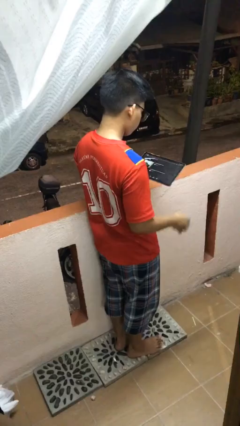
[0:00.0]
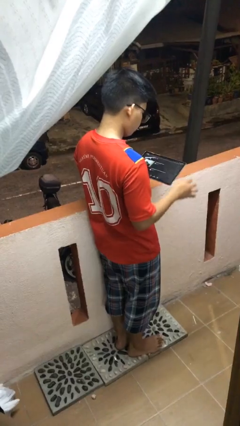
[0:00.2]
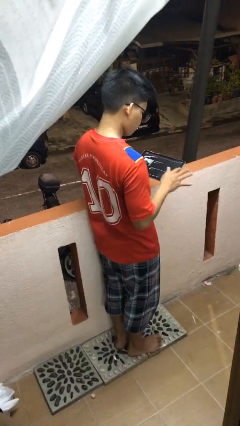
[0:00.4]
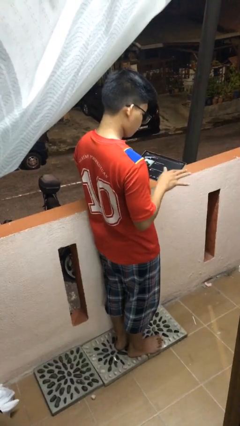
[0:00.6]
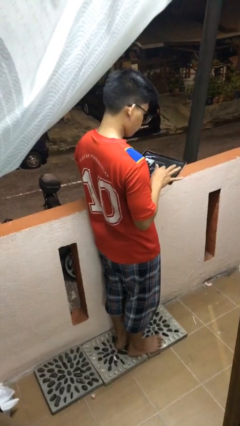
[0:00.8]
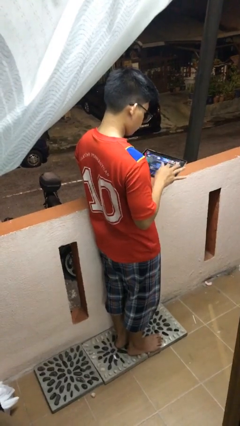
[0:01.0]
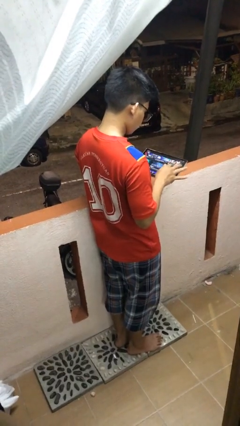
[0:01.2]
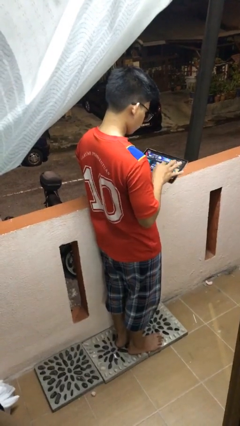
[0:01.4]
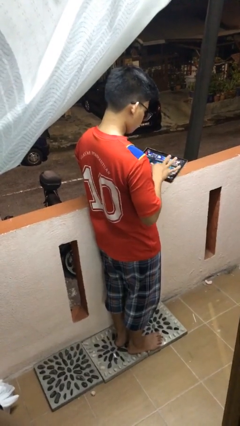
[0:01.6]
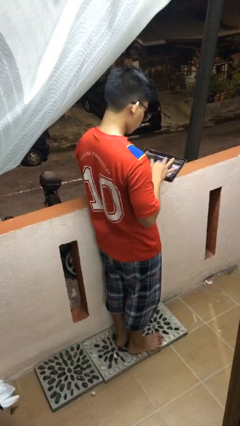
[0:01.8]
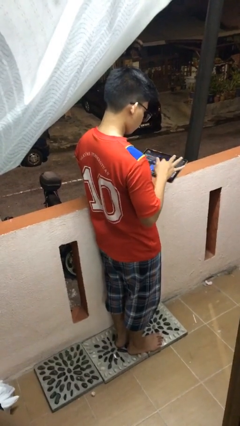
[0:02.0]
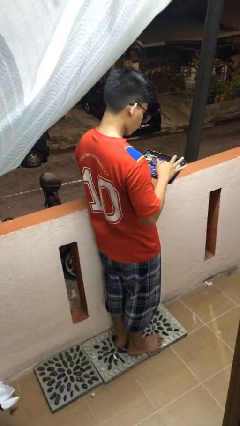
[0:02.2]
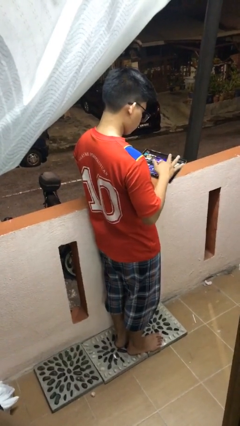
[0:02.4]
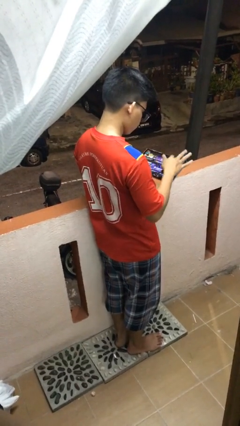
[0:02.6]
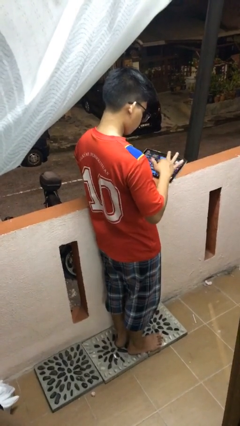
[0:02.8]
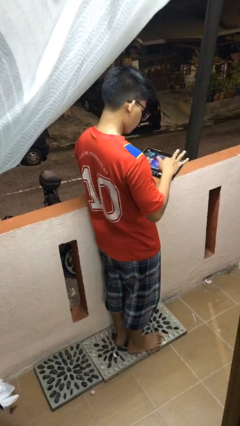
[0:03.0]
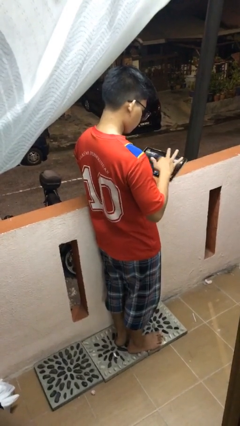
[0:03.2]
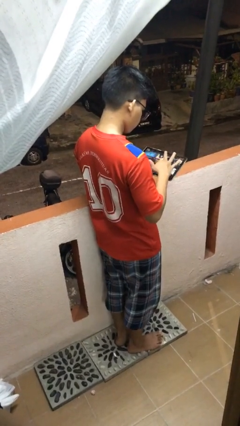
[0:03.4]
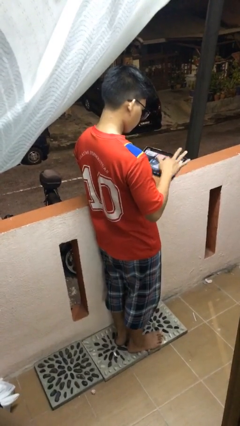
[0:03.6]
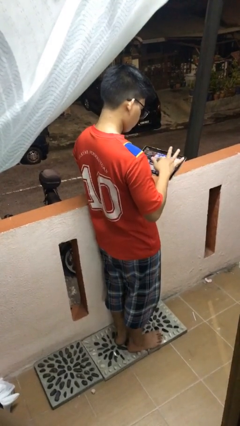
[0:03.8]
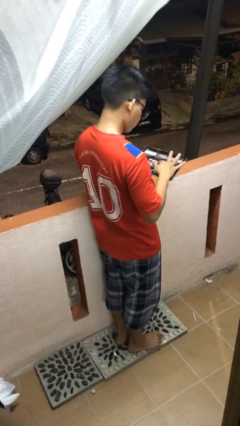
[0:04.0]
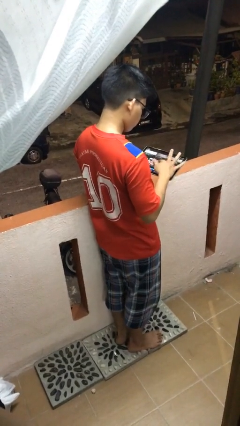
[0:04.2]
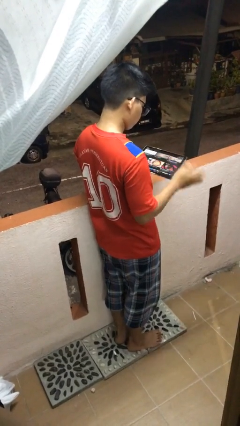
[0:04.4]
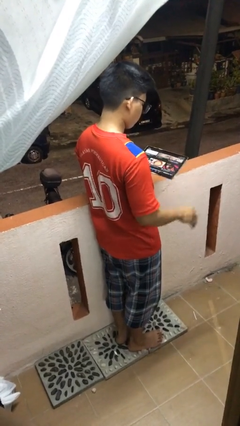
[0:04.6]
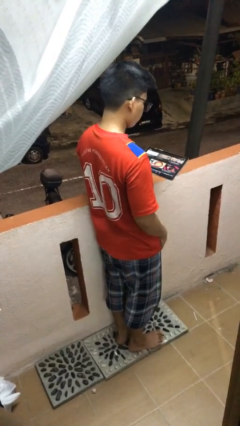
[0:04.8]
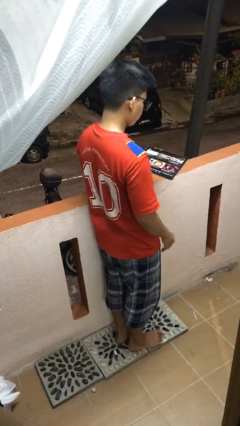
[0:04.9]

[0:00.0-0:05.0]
person interacts with tablet

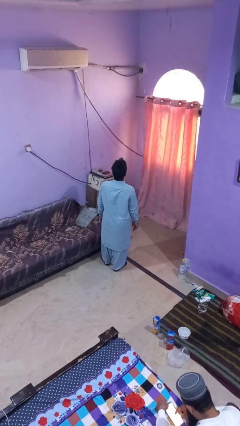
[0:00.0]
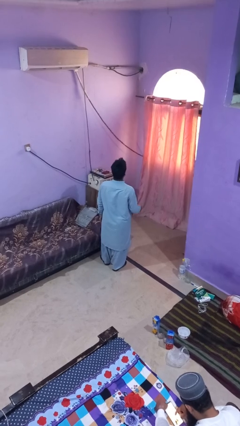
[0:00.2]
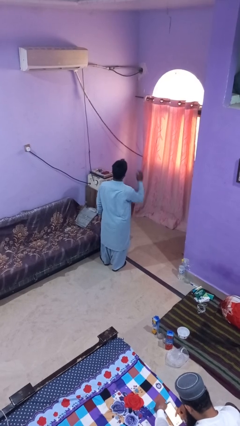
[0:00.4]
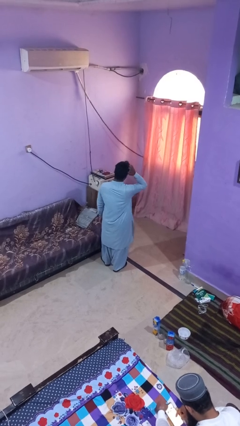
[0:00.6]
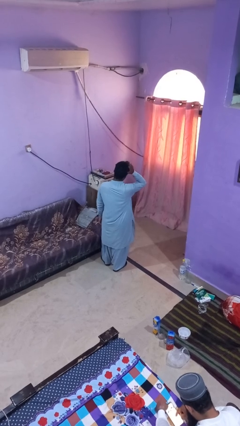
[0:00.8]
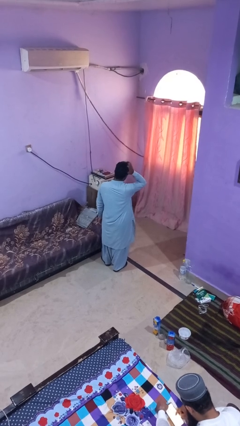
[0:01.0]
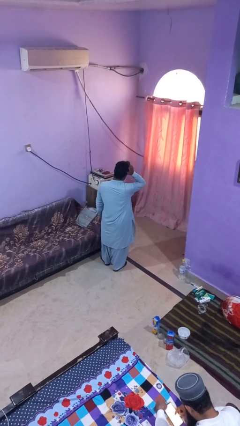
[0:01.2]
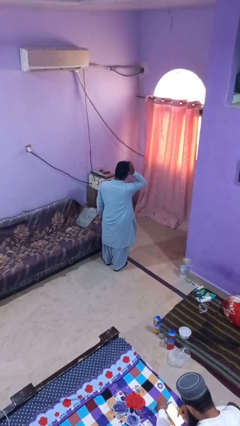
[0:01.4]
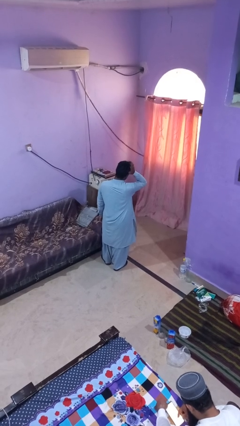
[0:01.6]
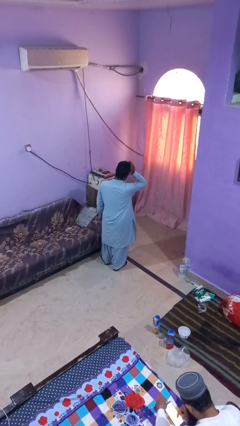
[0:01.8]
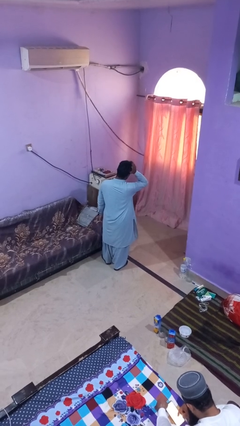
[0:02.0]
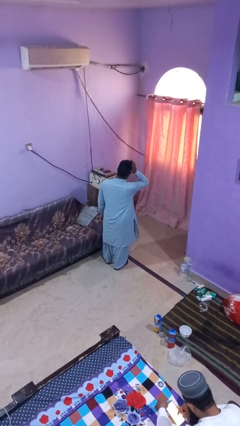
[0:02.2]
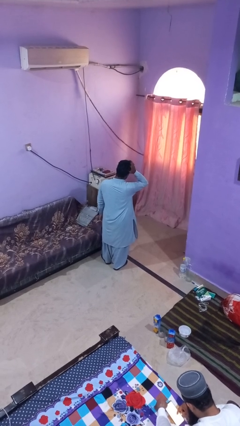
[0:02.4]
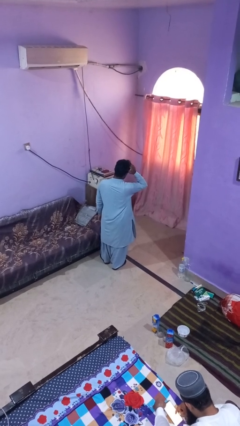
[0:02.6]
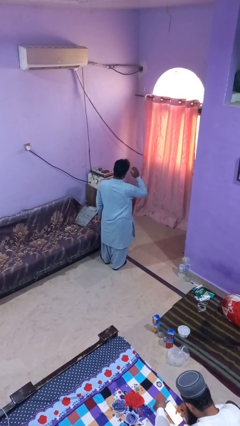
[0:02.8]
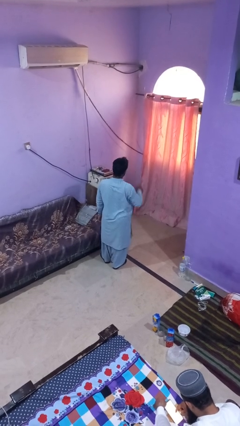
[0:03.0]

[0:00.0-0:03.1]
person scratches face

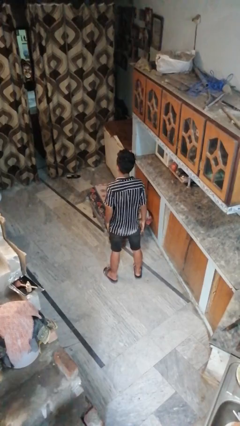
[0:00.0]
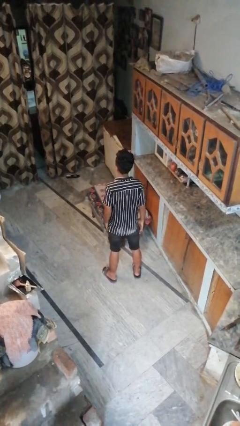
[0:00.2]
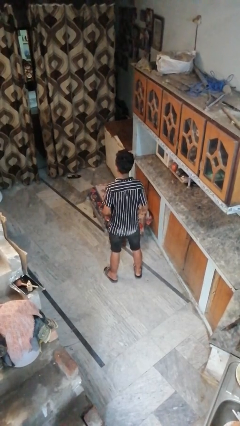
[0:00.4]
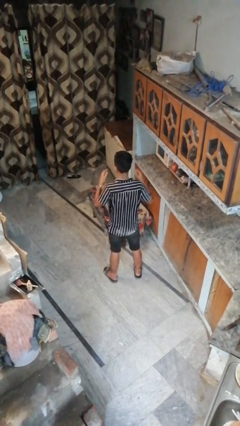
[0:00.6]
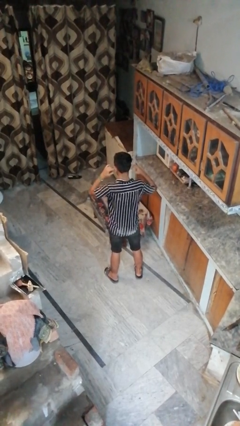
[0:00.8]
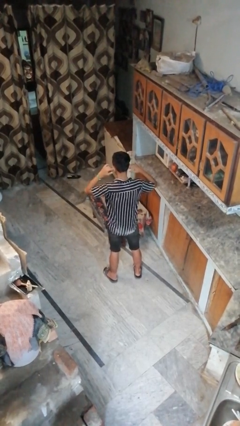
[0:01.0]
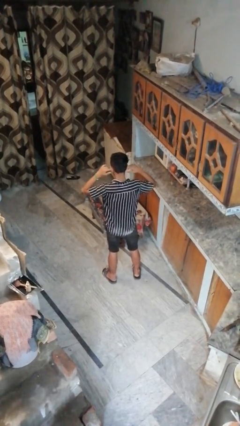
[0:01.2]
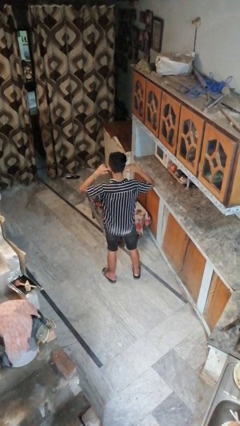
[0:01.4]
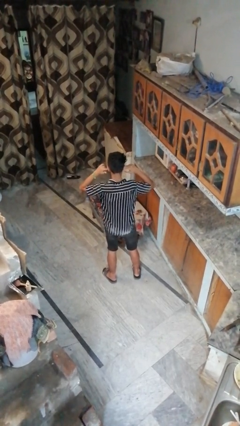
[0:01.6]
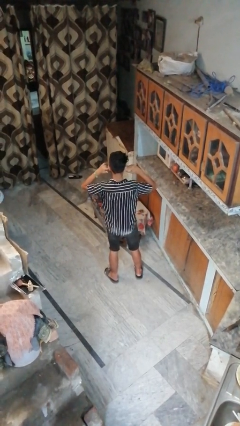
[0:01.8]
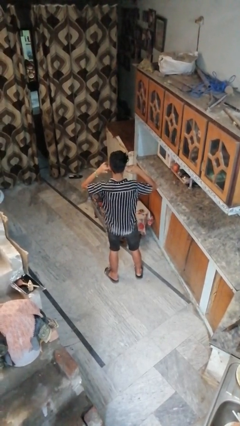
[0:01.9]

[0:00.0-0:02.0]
person puts fingers in ear

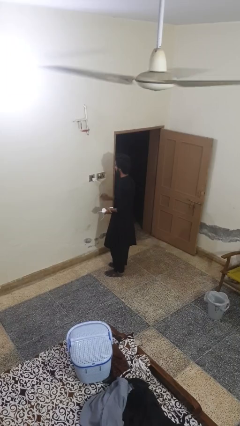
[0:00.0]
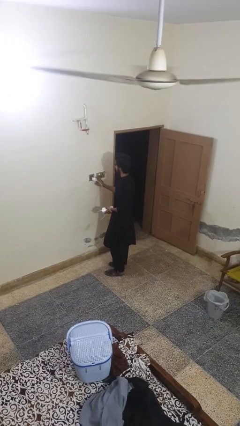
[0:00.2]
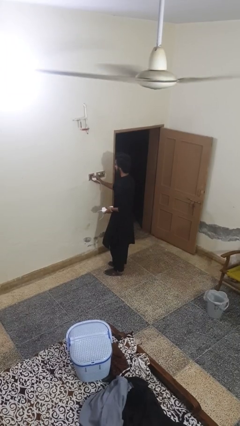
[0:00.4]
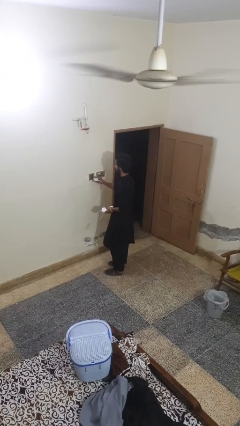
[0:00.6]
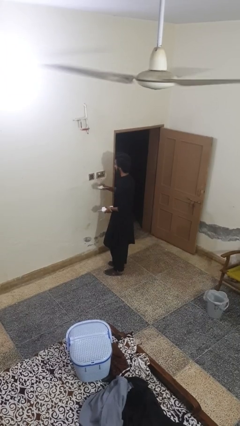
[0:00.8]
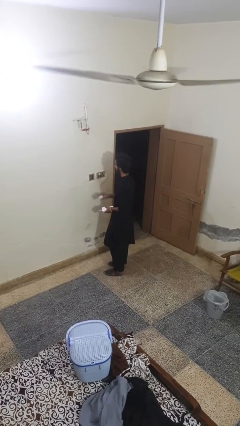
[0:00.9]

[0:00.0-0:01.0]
person unplugs from electrical socket

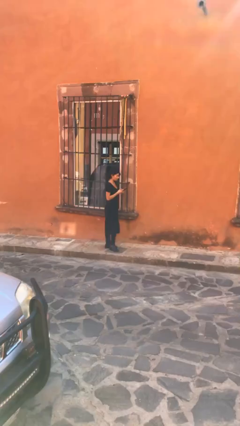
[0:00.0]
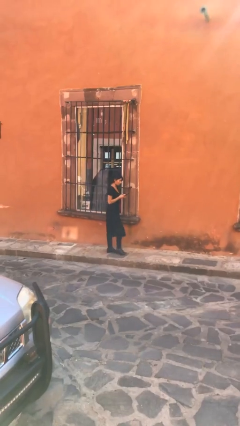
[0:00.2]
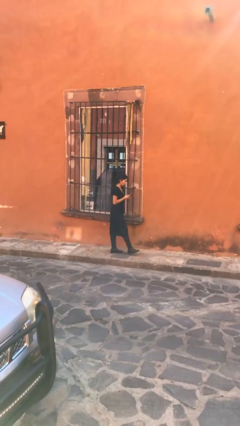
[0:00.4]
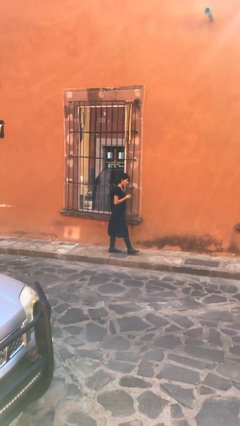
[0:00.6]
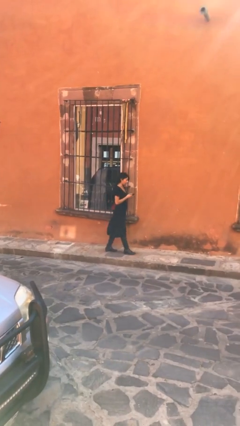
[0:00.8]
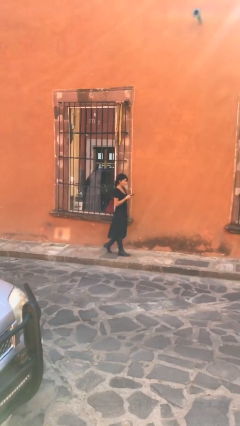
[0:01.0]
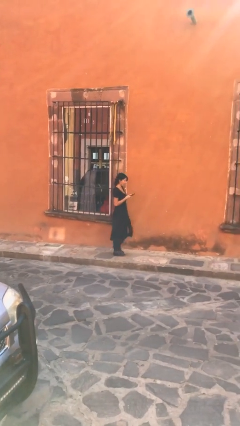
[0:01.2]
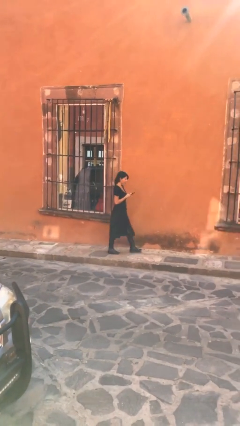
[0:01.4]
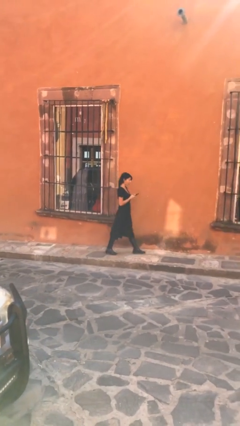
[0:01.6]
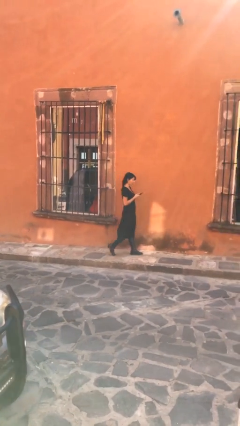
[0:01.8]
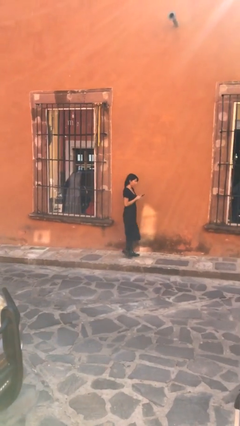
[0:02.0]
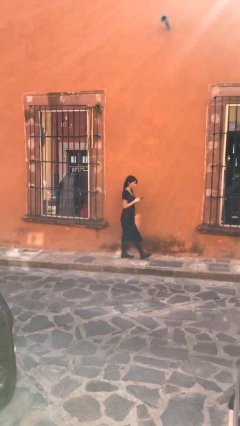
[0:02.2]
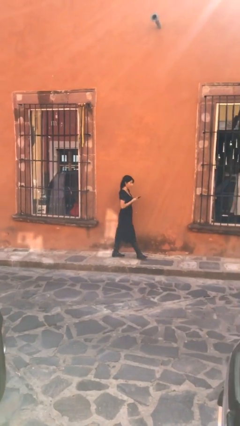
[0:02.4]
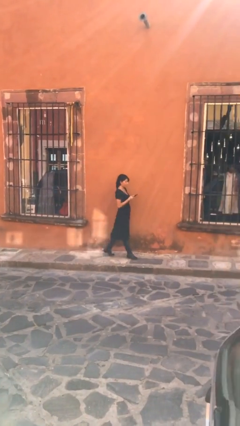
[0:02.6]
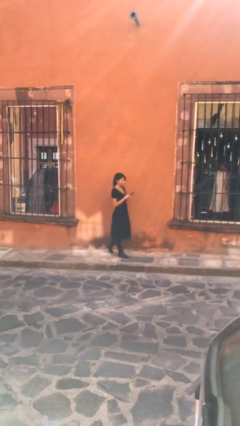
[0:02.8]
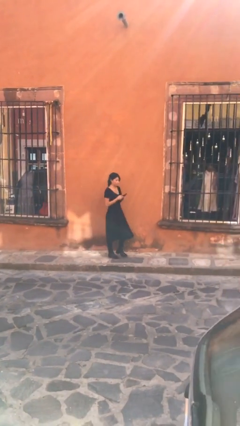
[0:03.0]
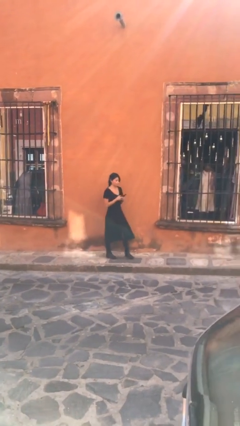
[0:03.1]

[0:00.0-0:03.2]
person texts on phone

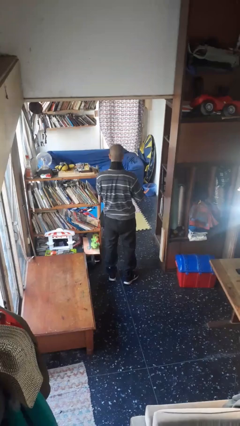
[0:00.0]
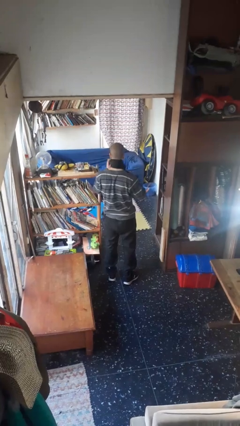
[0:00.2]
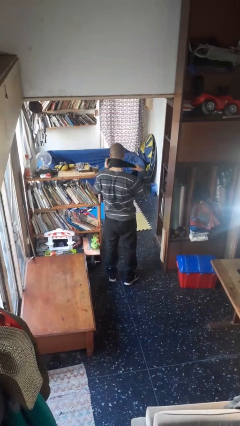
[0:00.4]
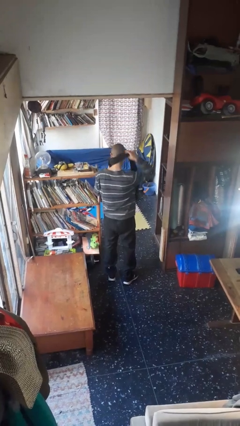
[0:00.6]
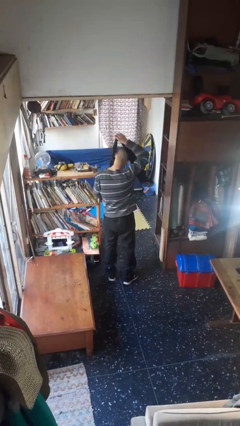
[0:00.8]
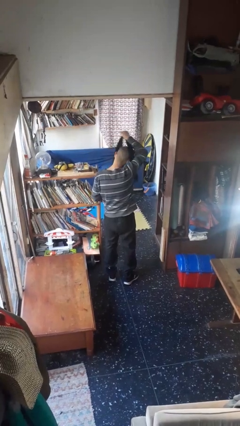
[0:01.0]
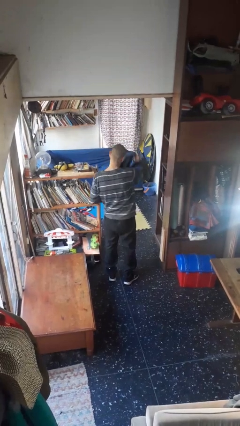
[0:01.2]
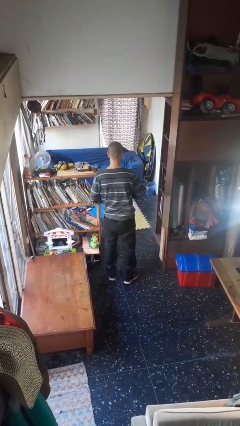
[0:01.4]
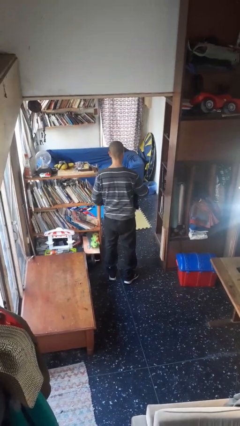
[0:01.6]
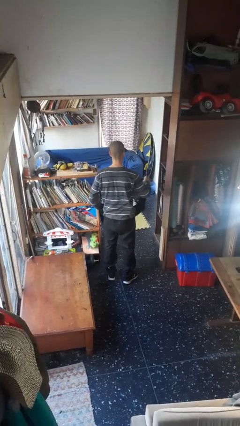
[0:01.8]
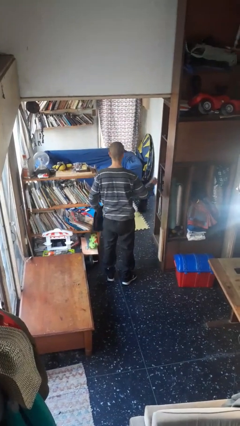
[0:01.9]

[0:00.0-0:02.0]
person takes off scarf

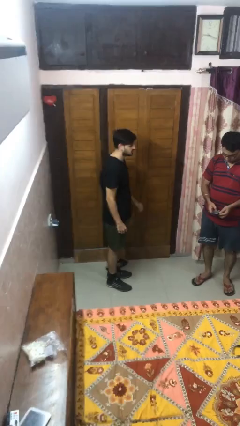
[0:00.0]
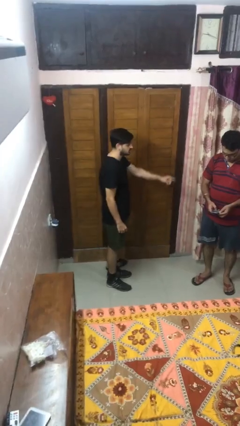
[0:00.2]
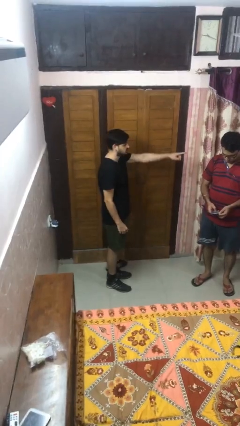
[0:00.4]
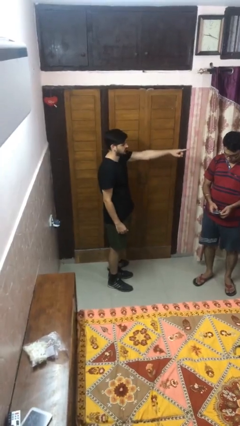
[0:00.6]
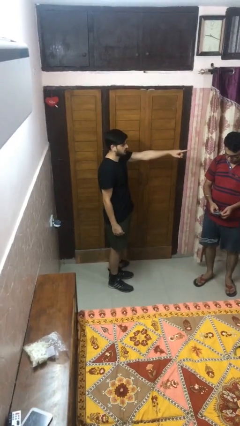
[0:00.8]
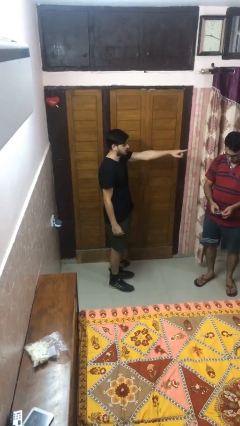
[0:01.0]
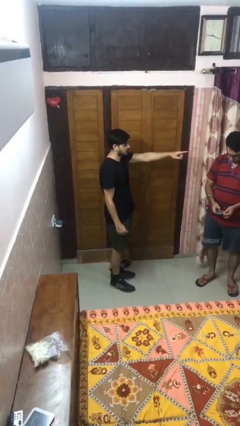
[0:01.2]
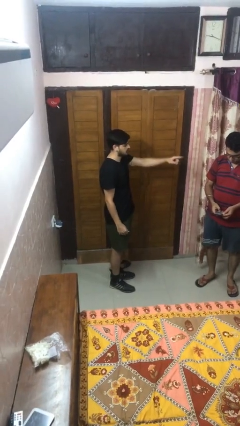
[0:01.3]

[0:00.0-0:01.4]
person points at person
